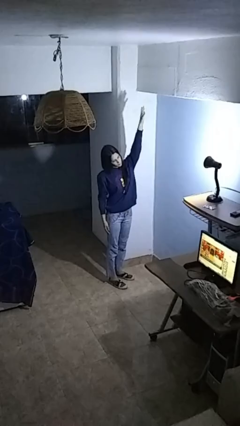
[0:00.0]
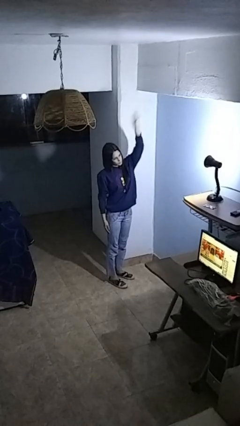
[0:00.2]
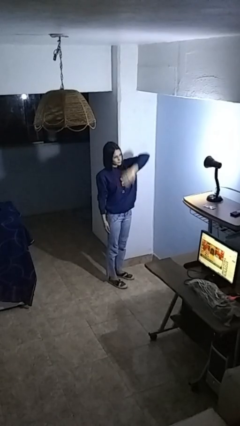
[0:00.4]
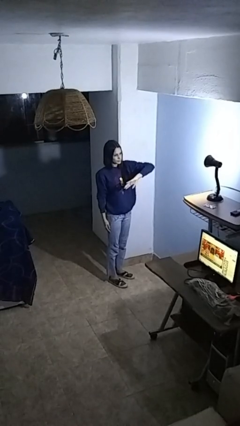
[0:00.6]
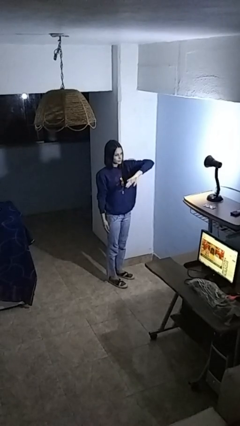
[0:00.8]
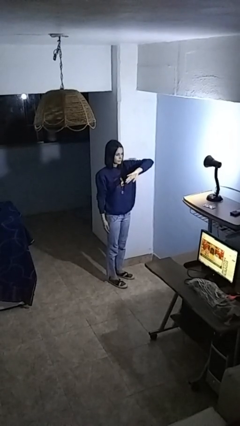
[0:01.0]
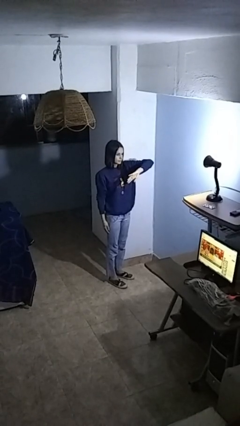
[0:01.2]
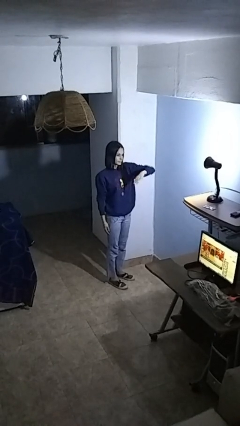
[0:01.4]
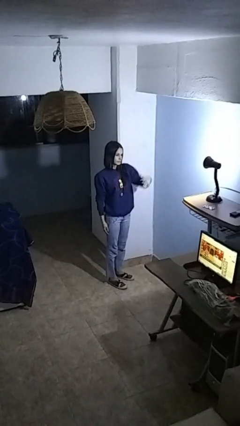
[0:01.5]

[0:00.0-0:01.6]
person gestures swipe down

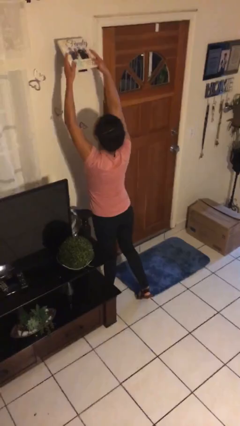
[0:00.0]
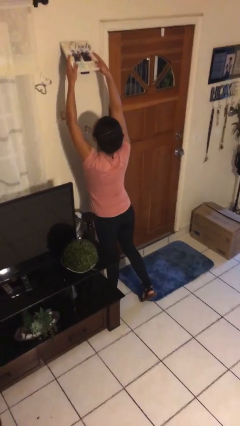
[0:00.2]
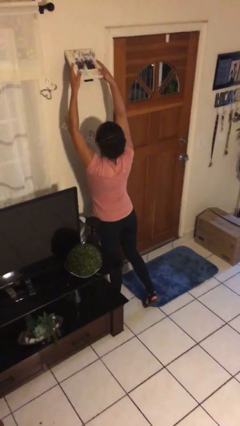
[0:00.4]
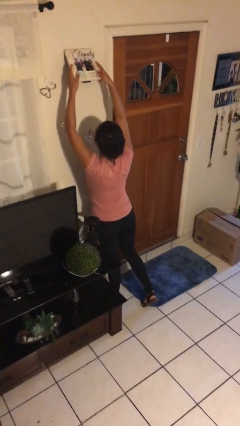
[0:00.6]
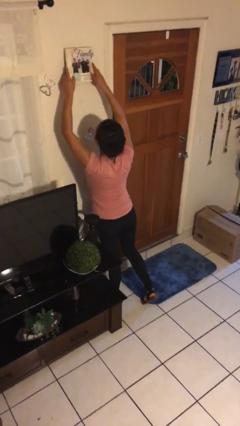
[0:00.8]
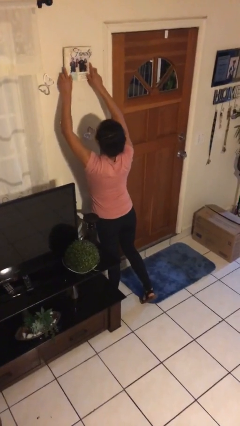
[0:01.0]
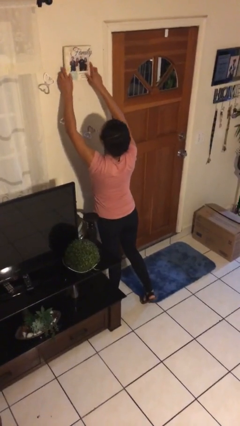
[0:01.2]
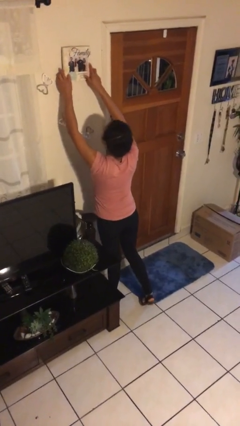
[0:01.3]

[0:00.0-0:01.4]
person puts up picture frame

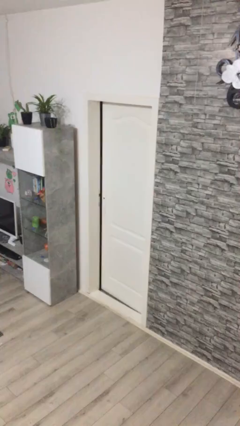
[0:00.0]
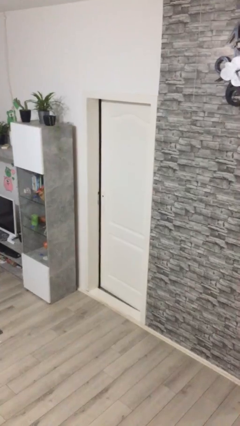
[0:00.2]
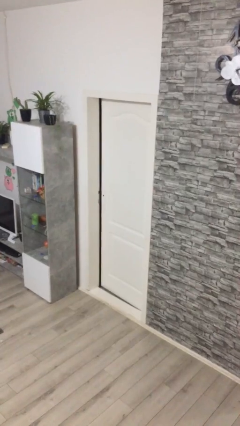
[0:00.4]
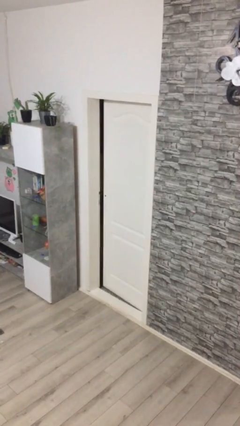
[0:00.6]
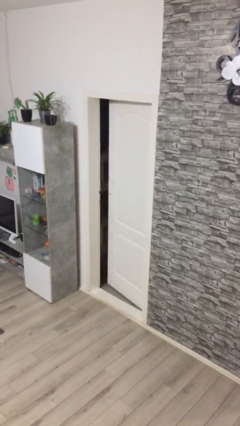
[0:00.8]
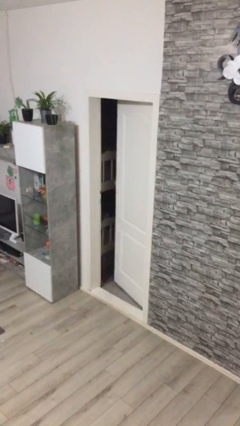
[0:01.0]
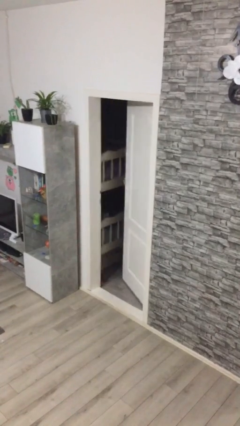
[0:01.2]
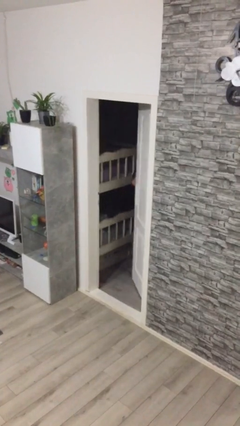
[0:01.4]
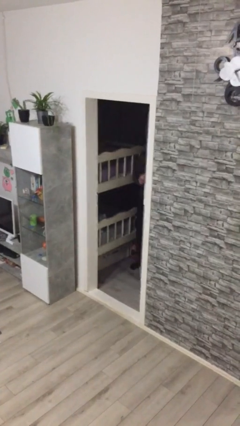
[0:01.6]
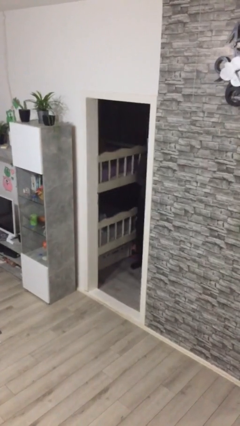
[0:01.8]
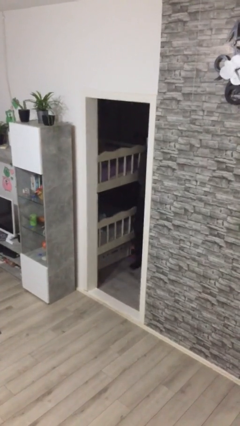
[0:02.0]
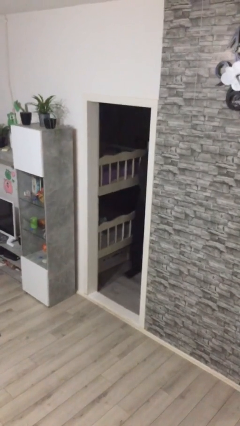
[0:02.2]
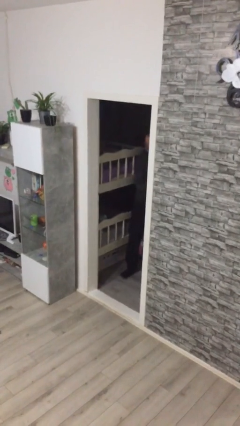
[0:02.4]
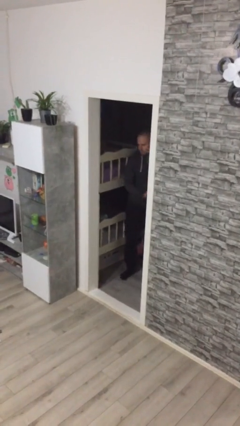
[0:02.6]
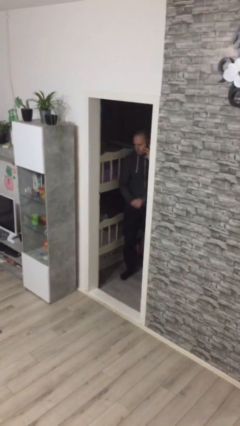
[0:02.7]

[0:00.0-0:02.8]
person opens facility door

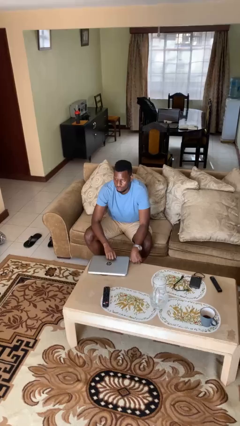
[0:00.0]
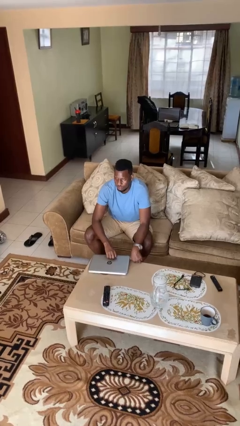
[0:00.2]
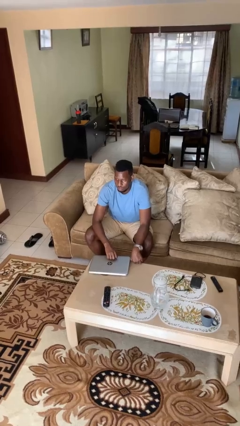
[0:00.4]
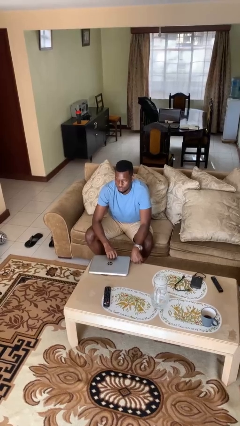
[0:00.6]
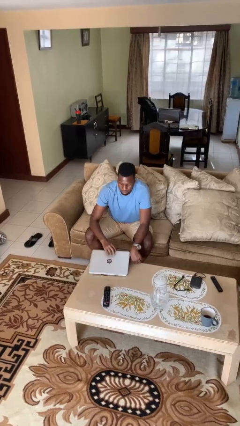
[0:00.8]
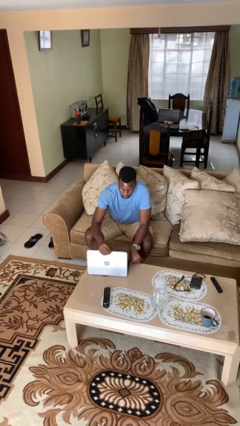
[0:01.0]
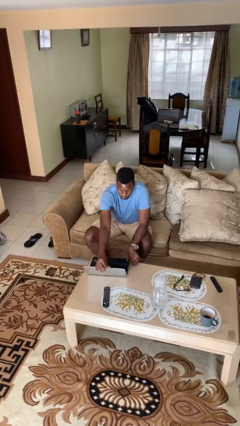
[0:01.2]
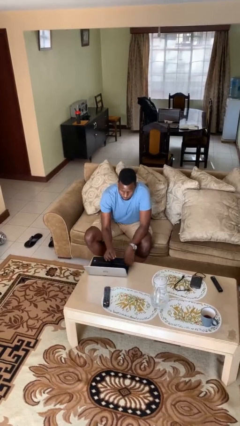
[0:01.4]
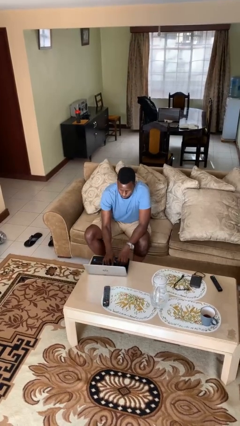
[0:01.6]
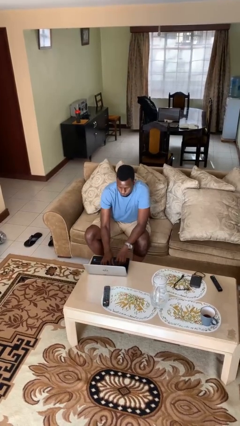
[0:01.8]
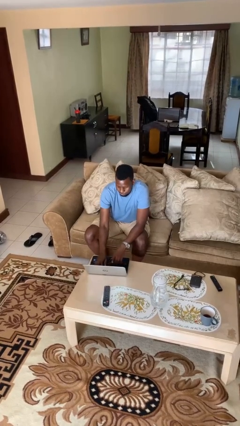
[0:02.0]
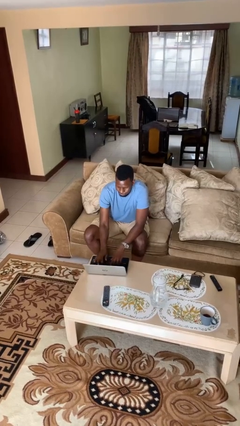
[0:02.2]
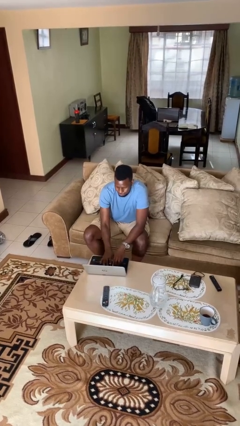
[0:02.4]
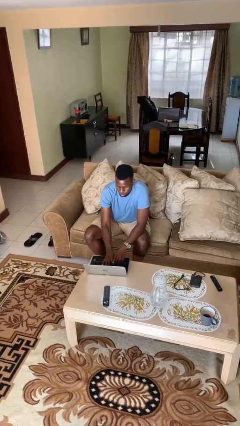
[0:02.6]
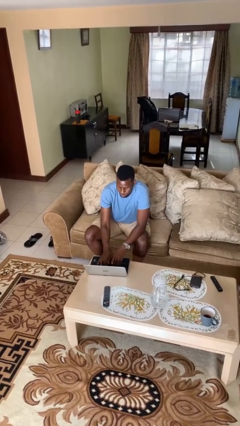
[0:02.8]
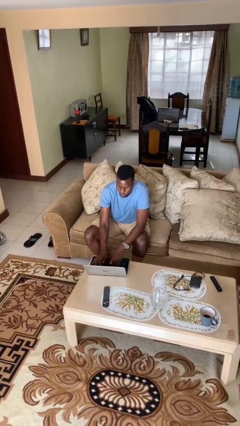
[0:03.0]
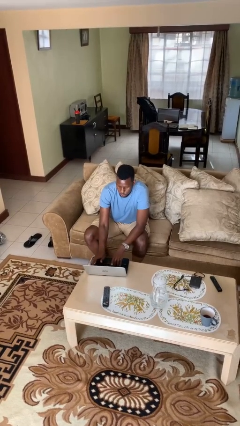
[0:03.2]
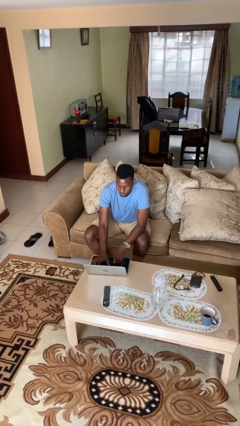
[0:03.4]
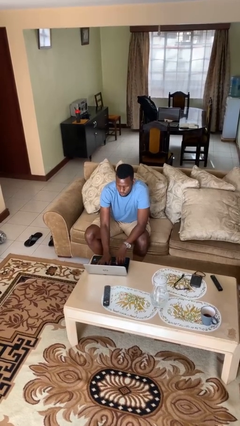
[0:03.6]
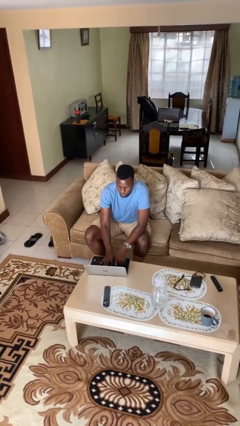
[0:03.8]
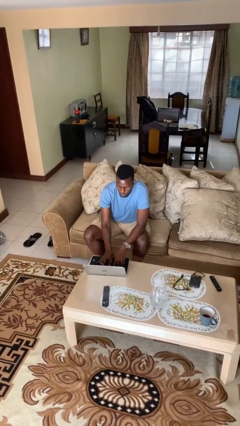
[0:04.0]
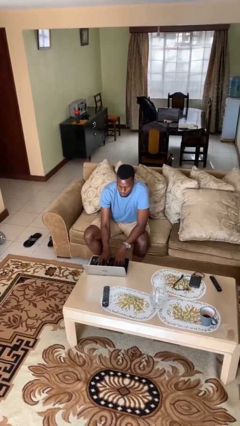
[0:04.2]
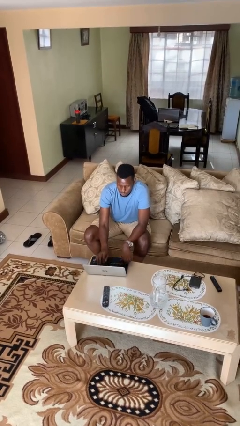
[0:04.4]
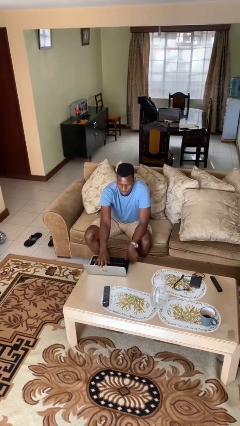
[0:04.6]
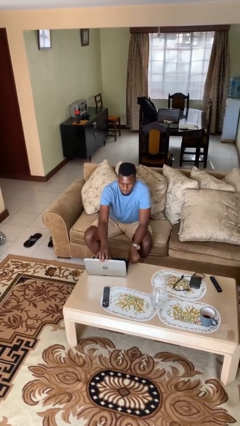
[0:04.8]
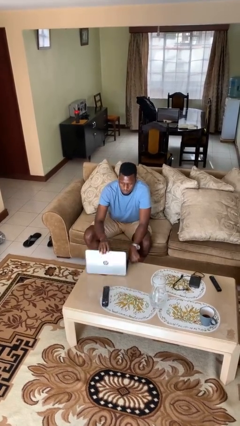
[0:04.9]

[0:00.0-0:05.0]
person interacts with laptop

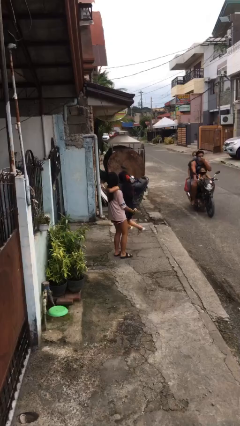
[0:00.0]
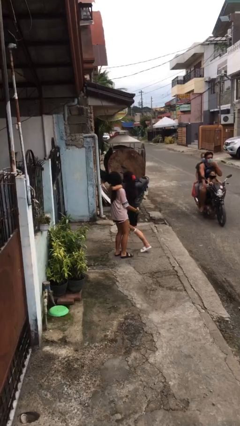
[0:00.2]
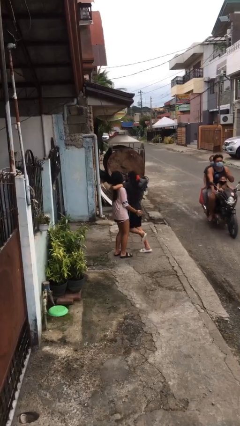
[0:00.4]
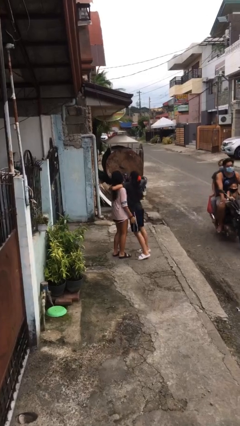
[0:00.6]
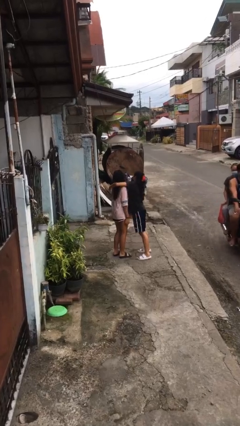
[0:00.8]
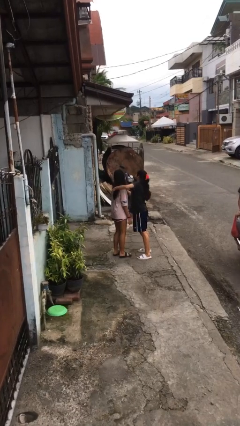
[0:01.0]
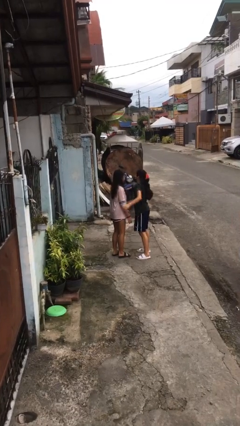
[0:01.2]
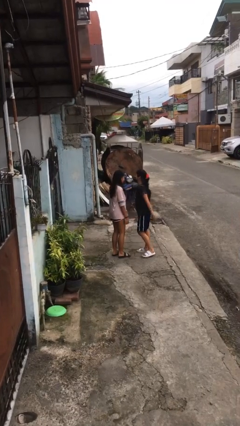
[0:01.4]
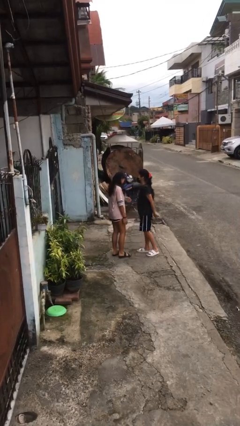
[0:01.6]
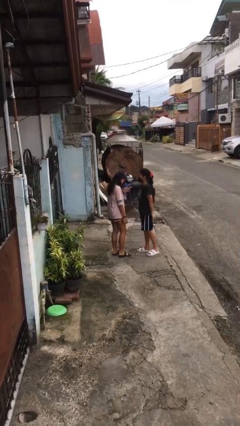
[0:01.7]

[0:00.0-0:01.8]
person puts down person

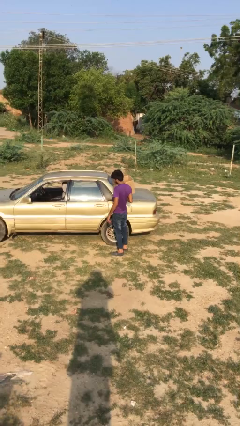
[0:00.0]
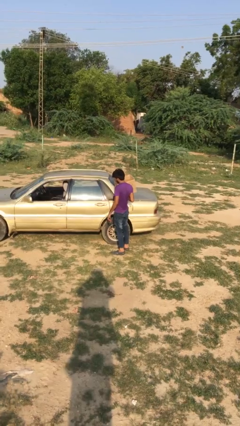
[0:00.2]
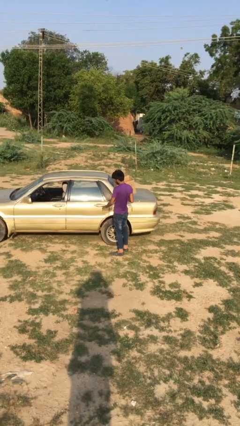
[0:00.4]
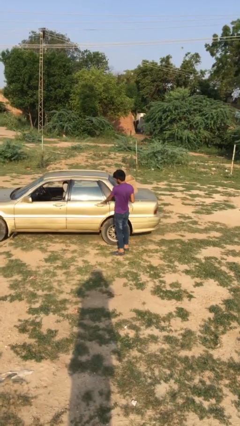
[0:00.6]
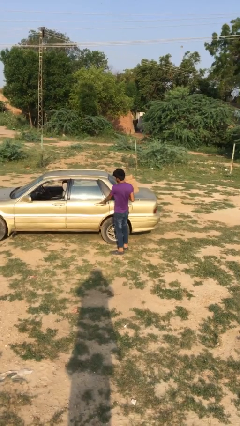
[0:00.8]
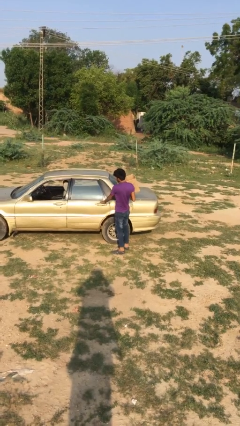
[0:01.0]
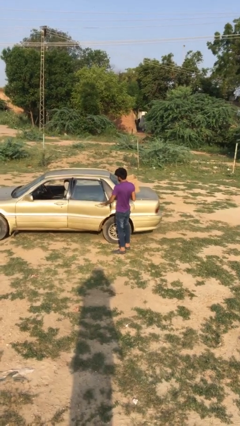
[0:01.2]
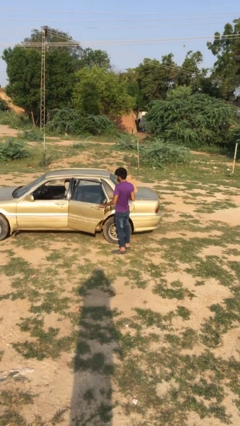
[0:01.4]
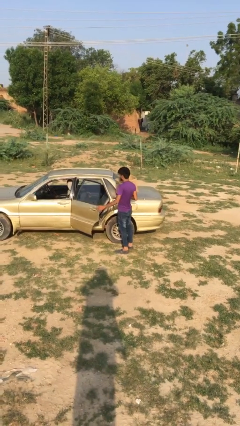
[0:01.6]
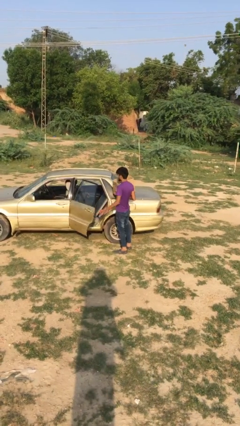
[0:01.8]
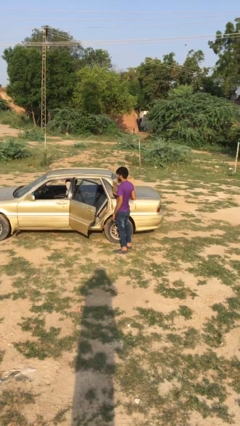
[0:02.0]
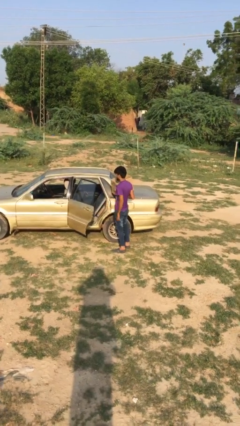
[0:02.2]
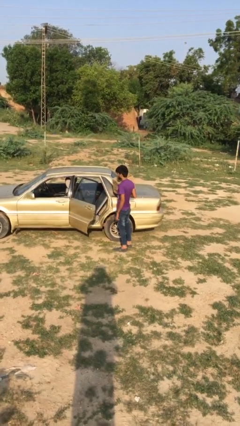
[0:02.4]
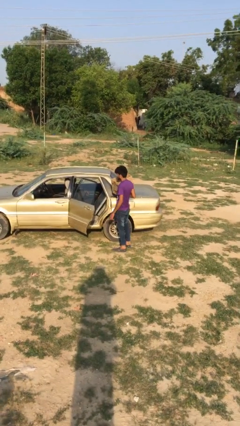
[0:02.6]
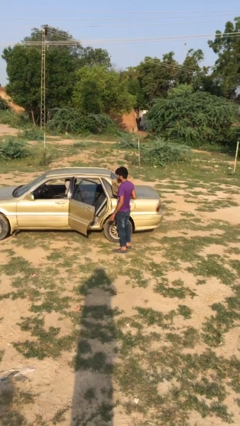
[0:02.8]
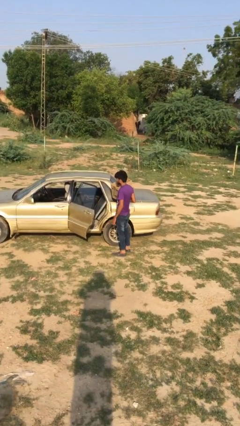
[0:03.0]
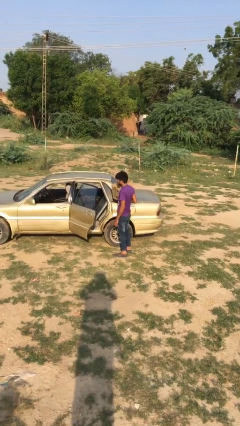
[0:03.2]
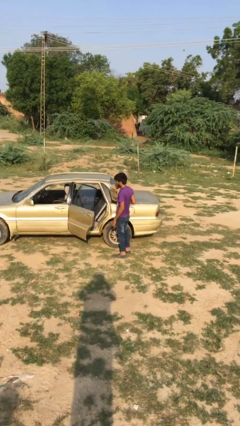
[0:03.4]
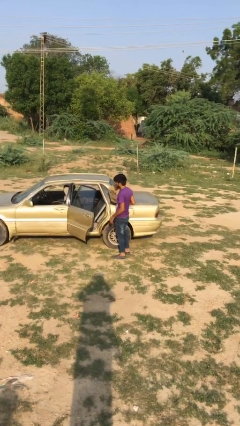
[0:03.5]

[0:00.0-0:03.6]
person opens car door

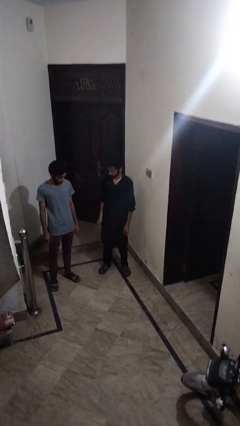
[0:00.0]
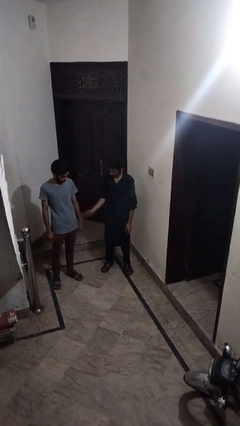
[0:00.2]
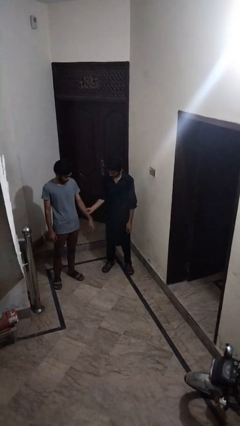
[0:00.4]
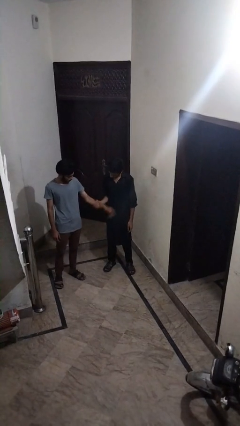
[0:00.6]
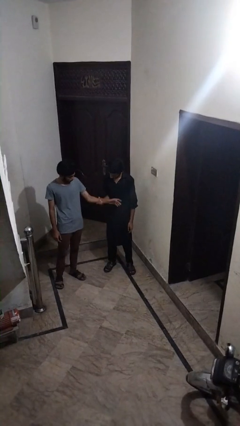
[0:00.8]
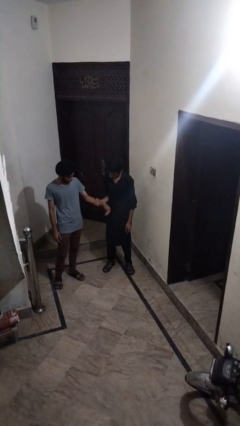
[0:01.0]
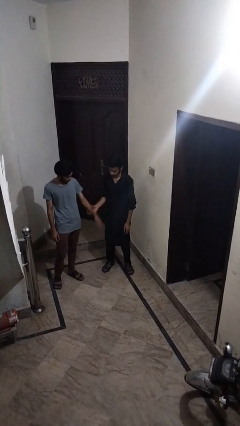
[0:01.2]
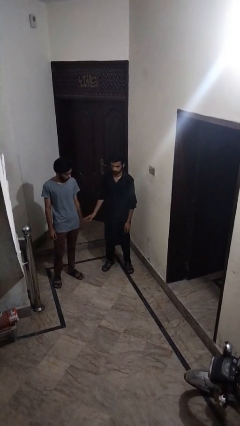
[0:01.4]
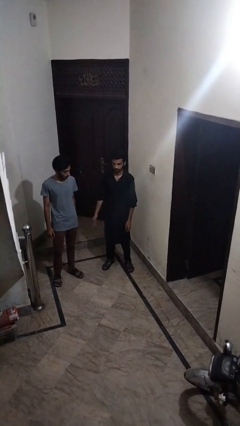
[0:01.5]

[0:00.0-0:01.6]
person grabs person by forearm
